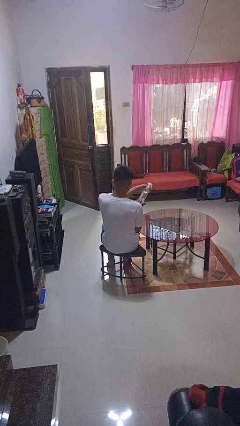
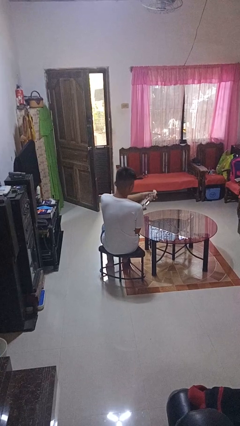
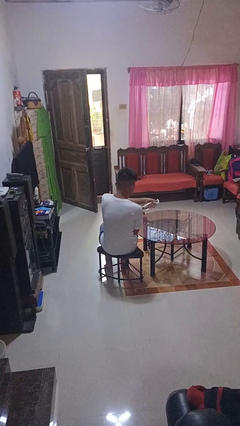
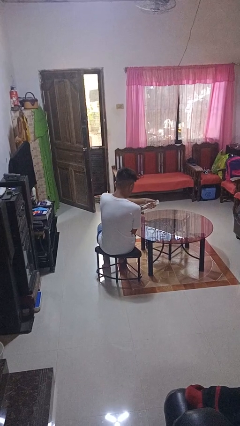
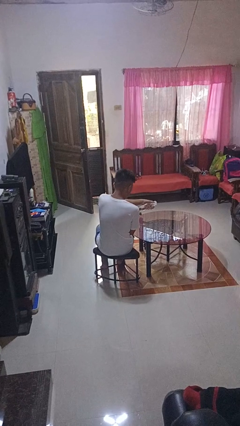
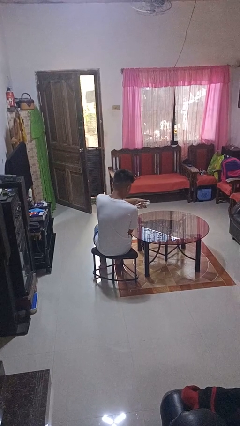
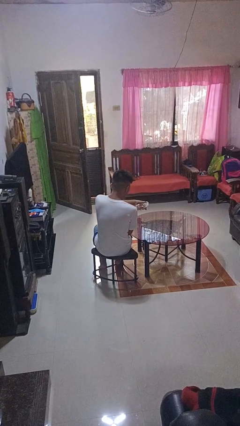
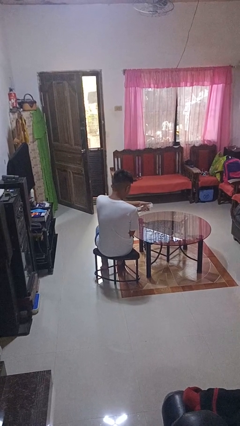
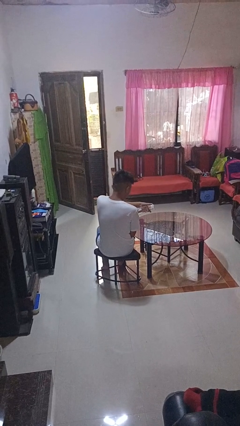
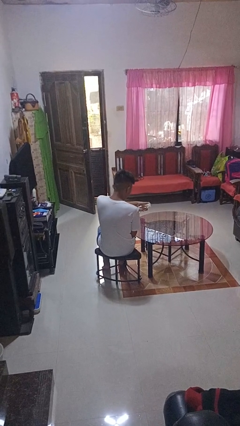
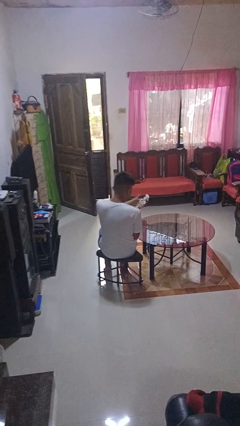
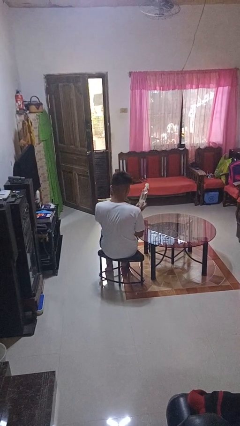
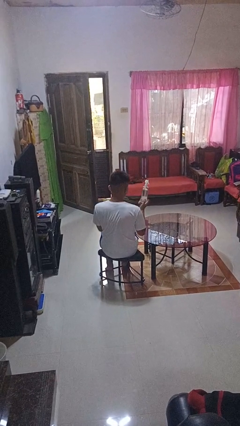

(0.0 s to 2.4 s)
person sprays from bottle

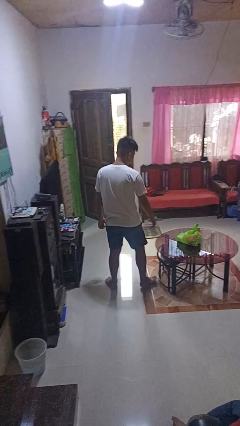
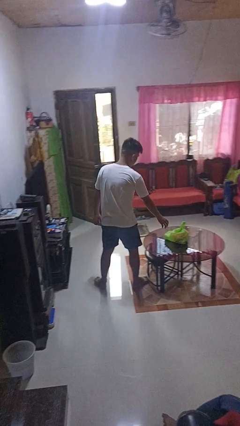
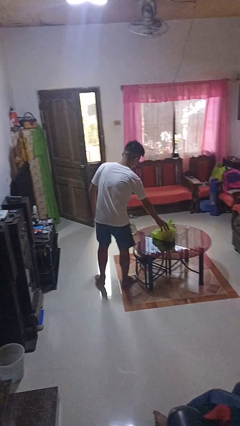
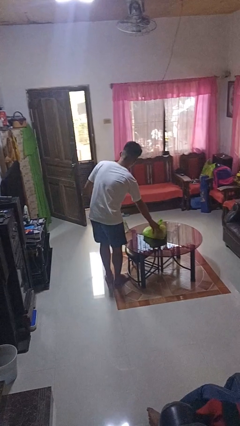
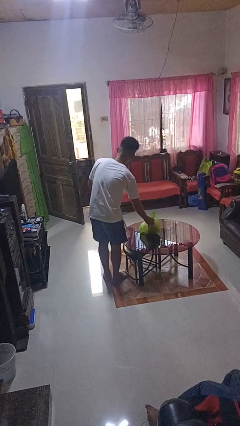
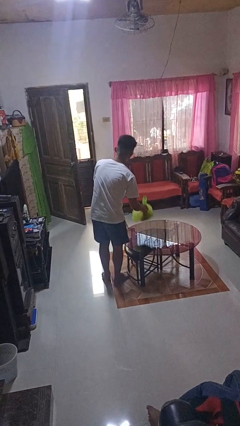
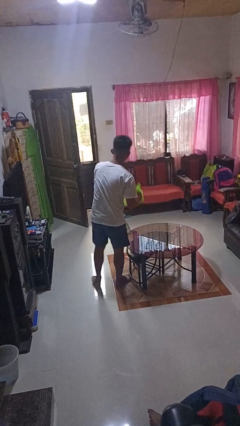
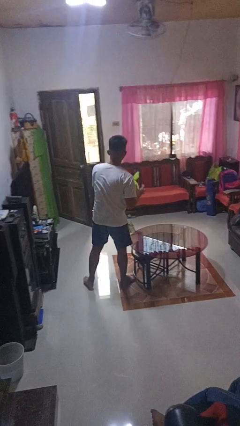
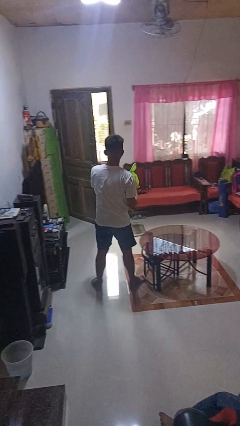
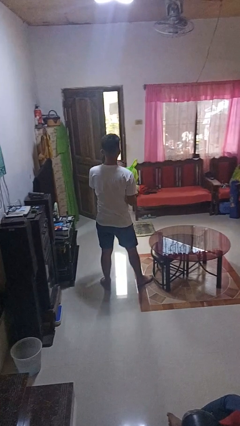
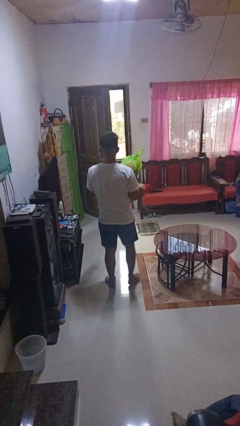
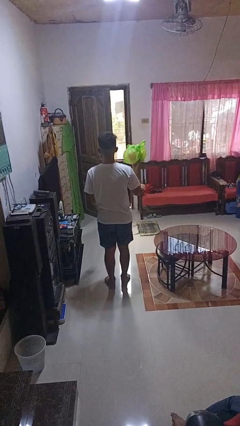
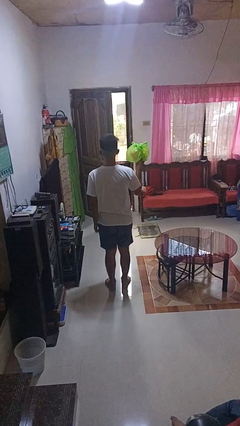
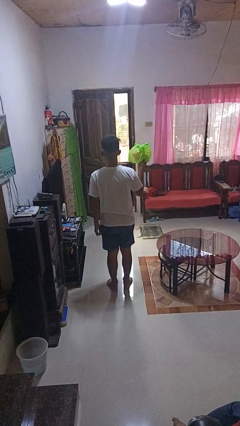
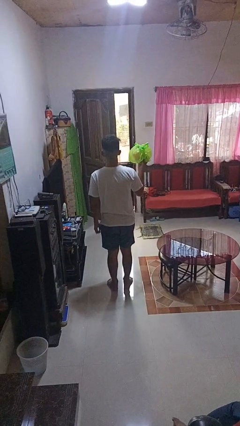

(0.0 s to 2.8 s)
person picks up object from table

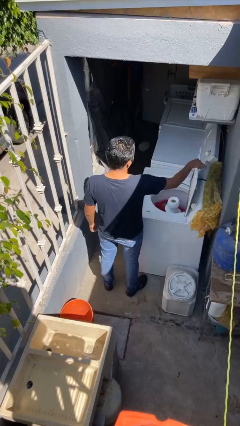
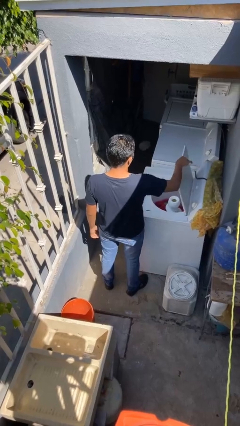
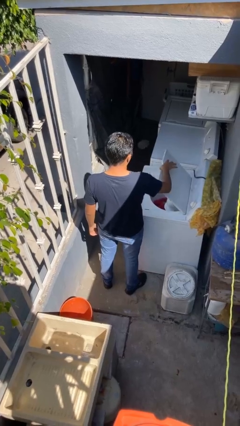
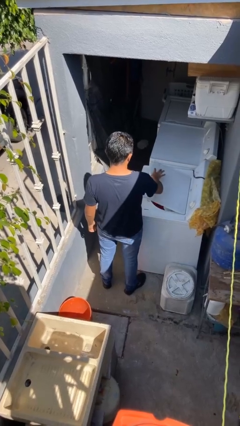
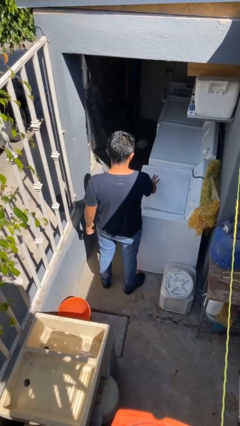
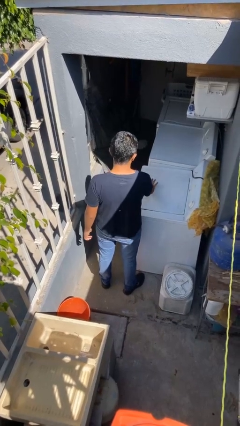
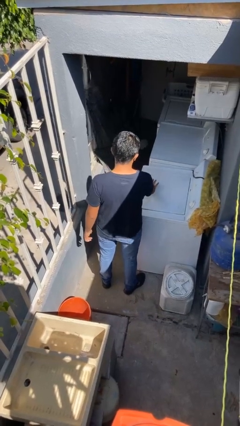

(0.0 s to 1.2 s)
person closes clothes washer

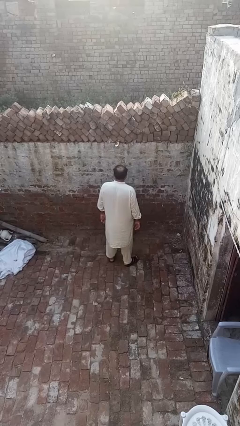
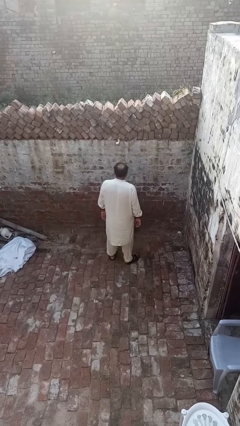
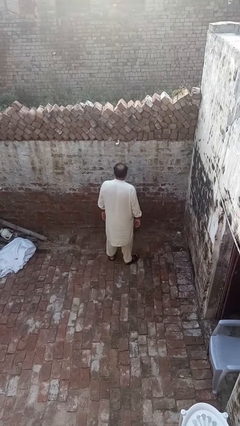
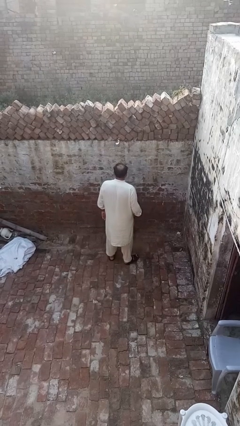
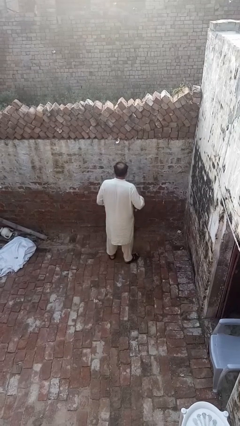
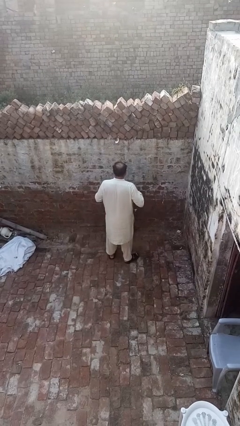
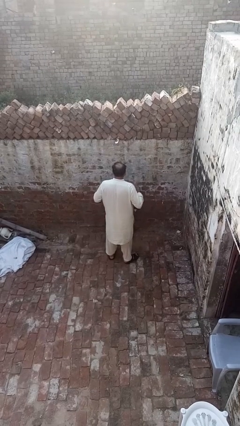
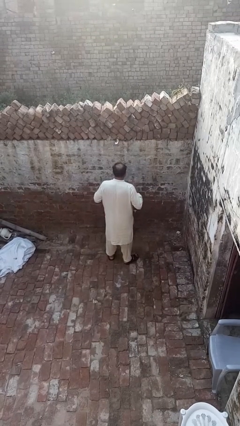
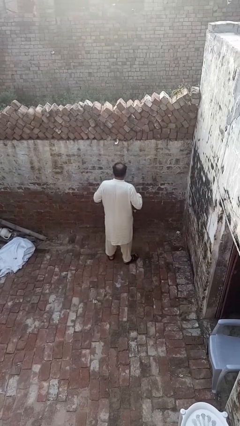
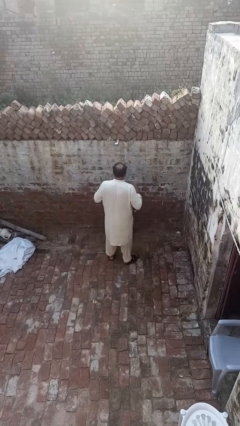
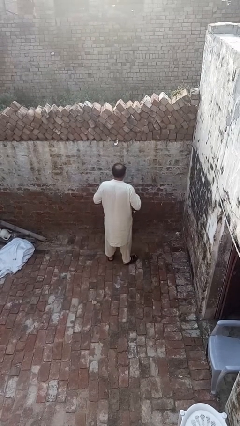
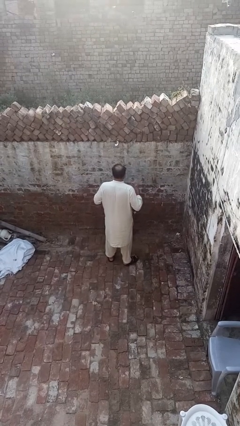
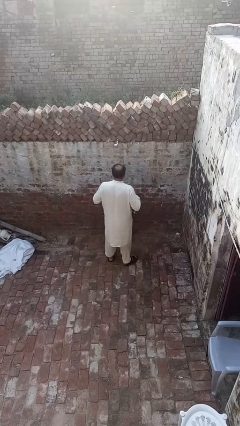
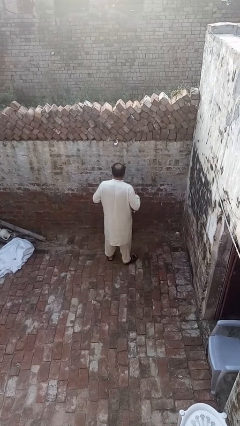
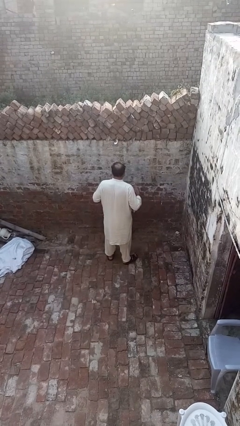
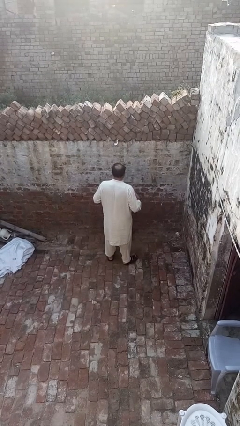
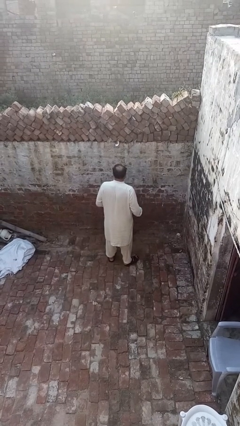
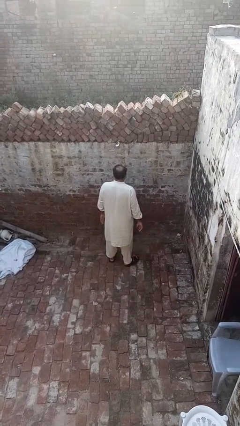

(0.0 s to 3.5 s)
person drums on chest

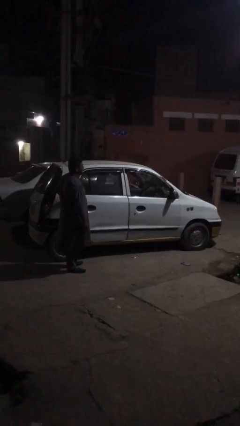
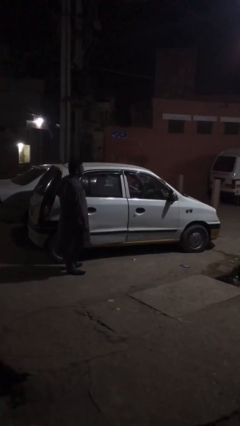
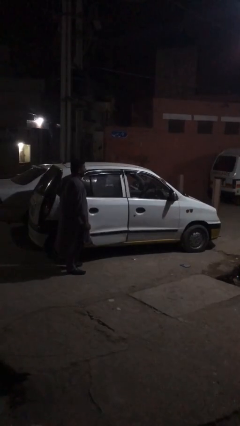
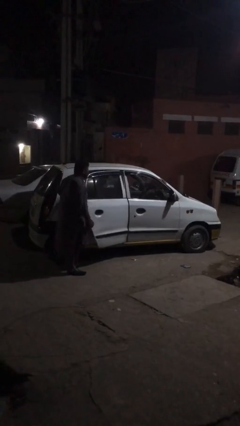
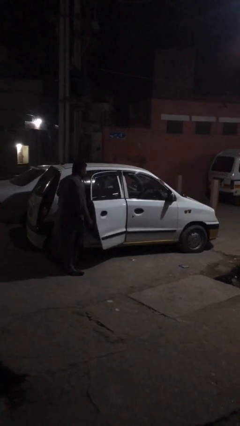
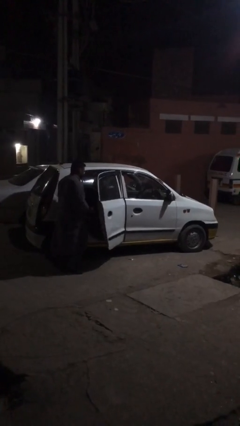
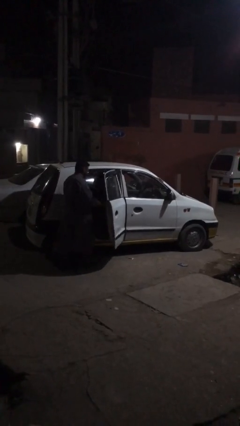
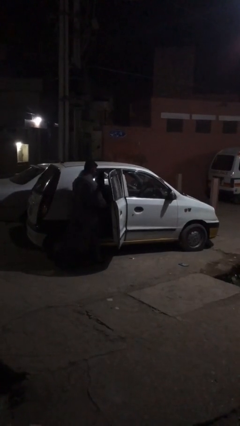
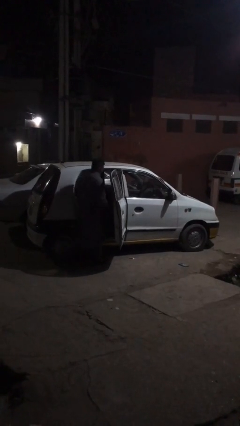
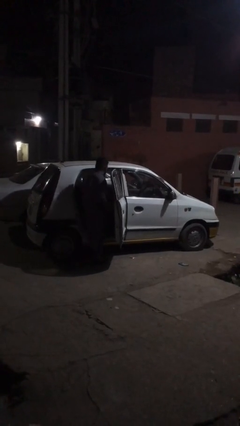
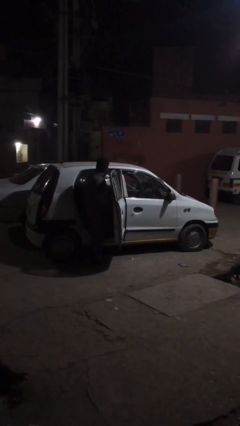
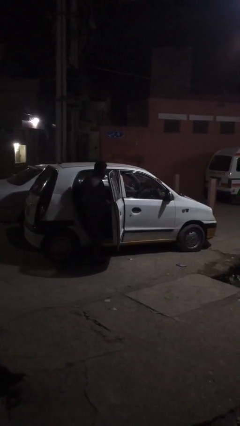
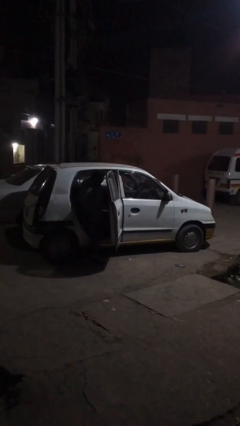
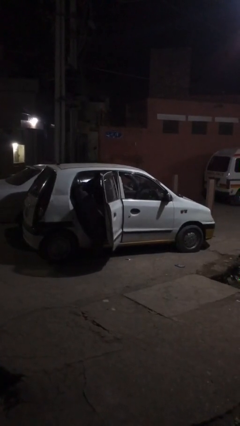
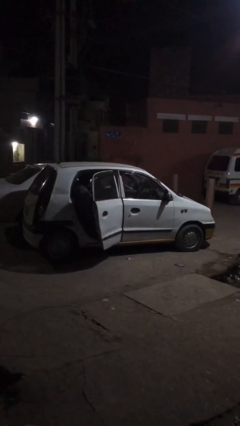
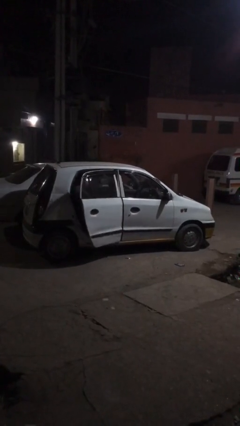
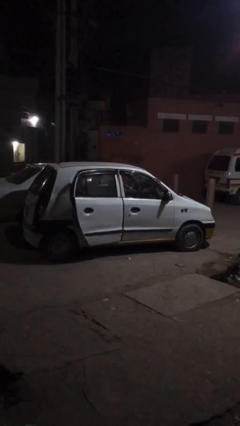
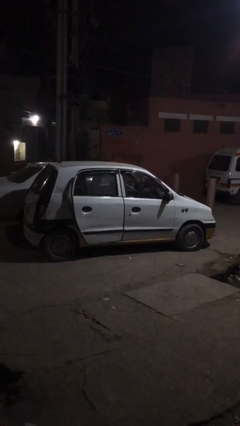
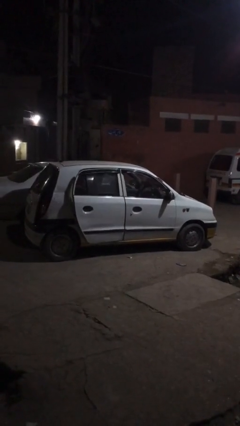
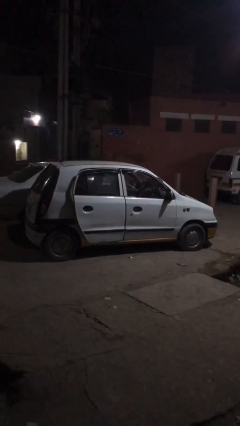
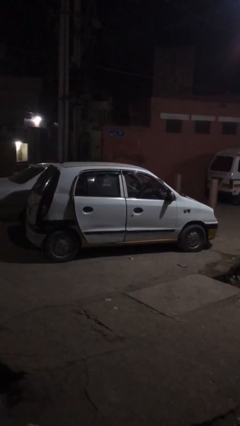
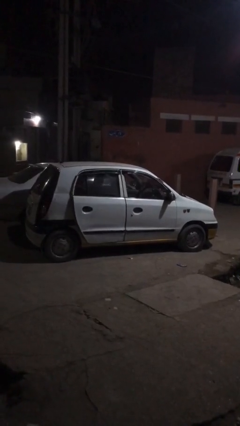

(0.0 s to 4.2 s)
car picks up person

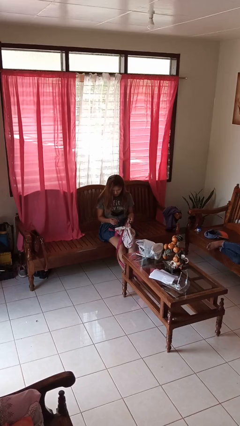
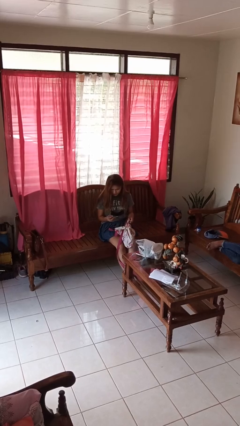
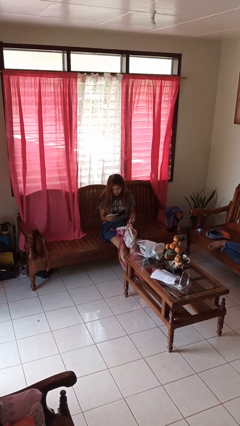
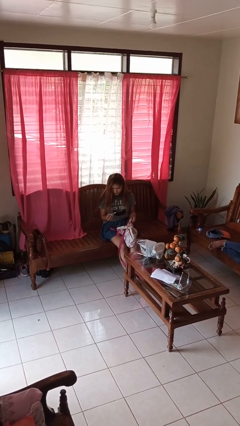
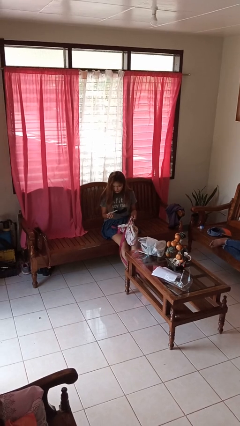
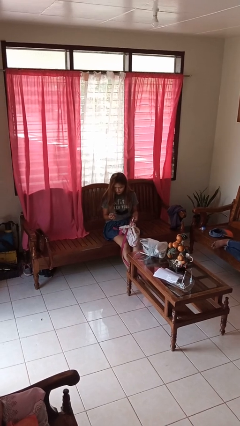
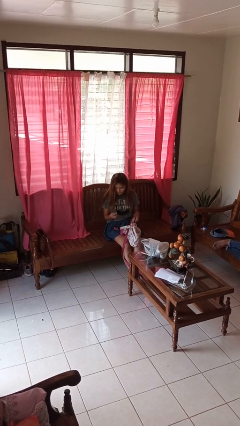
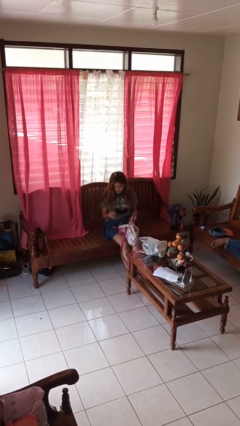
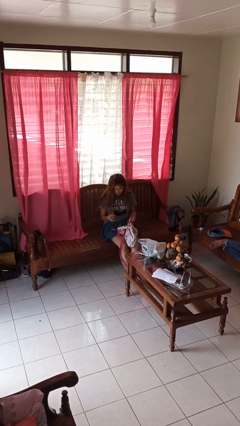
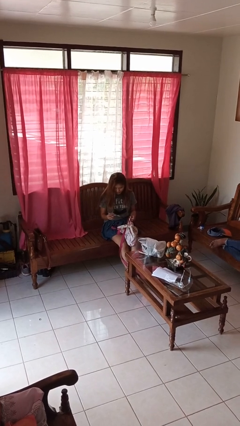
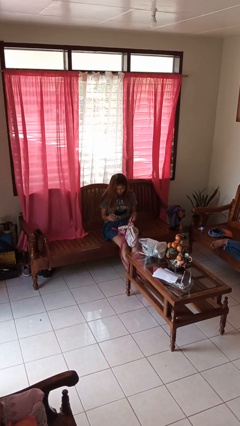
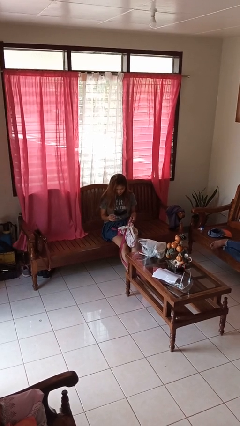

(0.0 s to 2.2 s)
person takes object from backpack

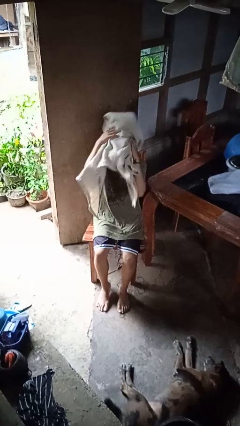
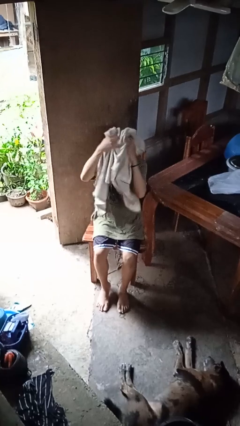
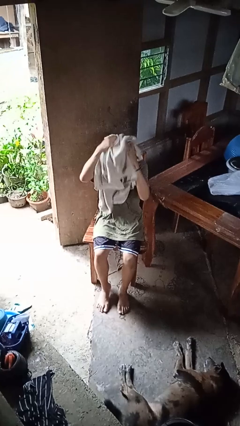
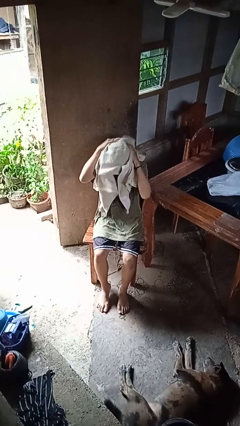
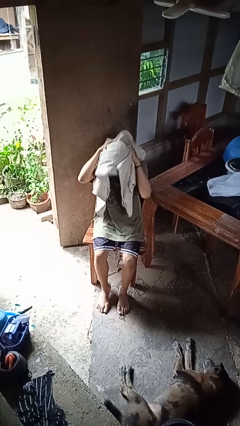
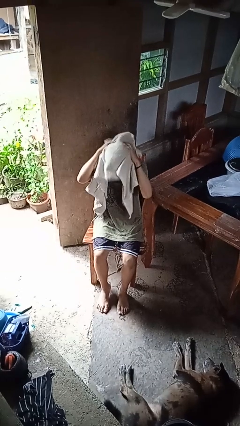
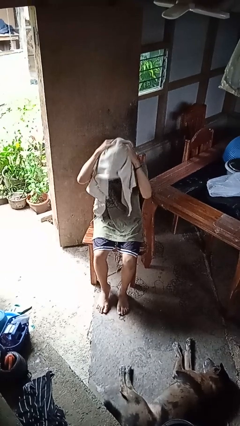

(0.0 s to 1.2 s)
person dries hair with towel
